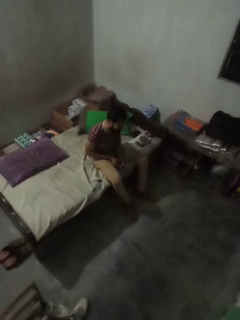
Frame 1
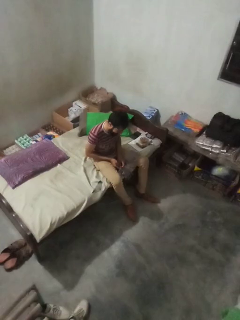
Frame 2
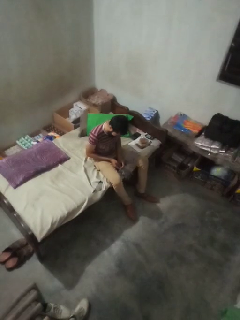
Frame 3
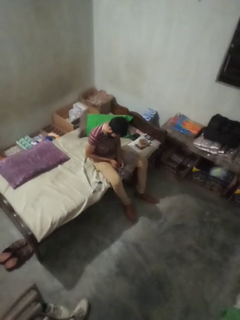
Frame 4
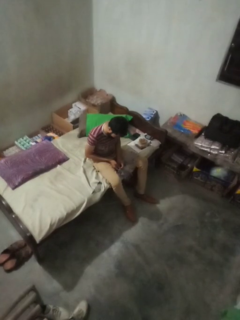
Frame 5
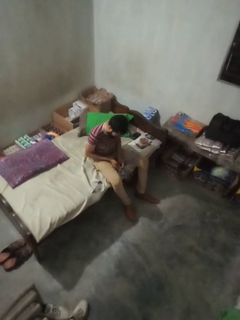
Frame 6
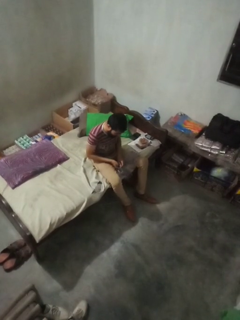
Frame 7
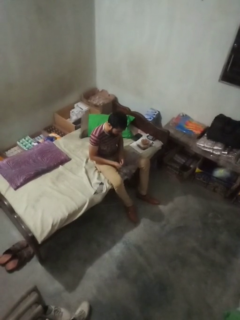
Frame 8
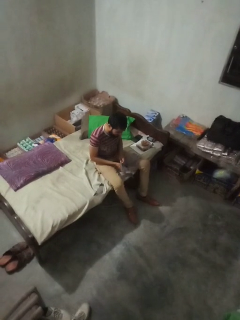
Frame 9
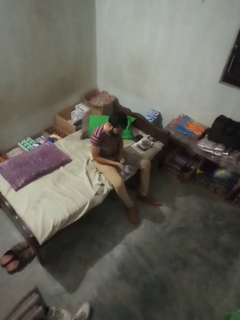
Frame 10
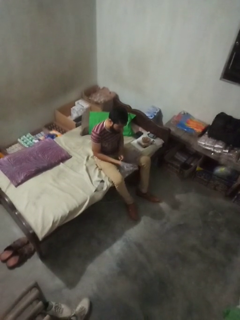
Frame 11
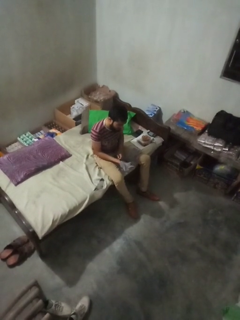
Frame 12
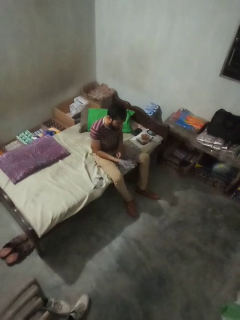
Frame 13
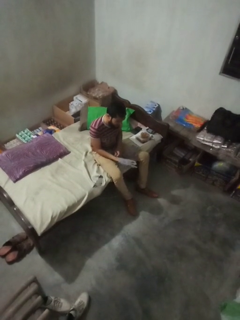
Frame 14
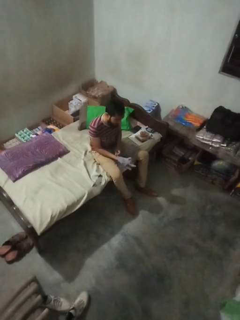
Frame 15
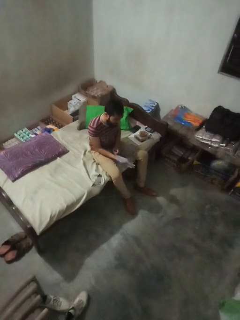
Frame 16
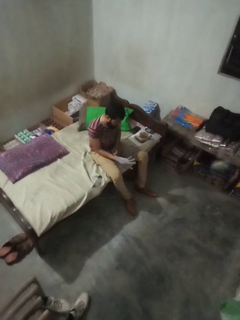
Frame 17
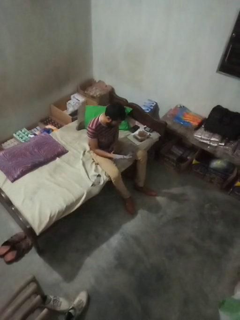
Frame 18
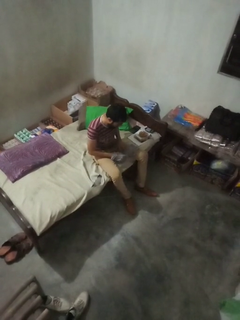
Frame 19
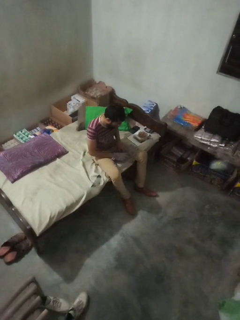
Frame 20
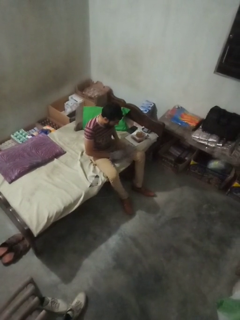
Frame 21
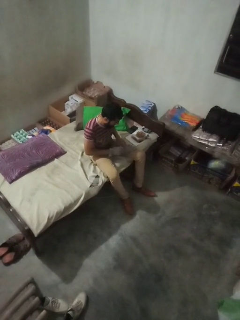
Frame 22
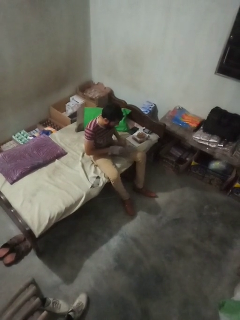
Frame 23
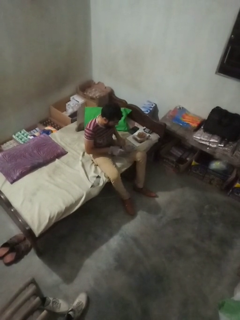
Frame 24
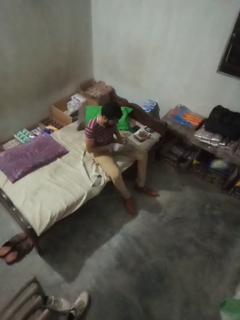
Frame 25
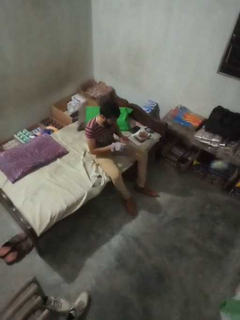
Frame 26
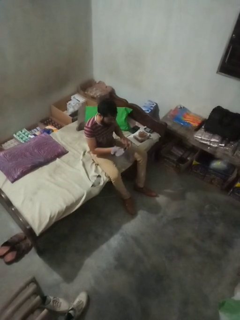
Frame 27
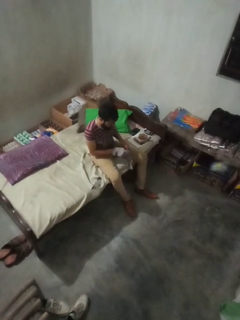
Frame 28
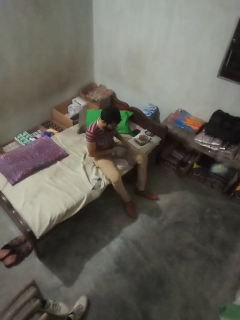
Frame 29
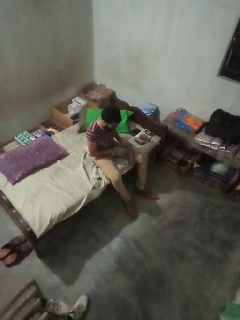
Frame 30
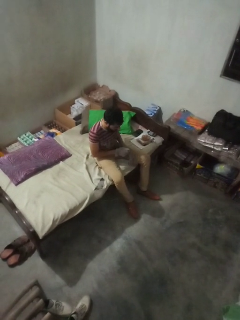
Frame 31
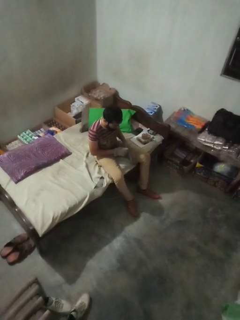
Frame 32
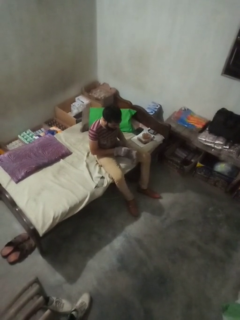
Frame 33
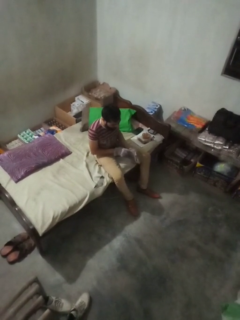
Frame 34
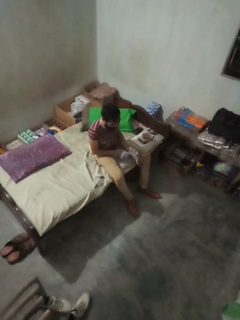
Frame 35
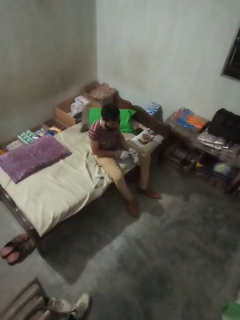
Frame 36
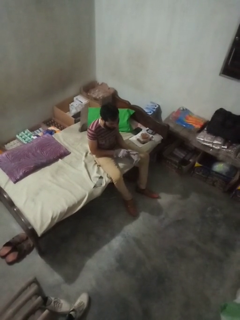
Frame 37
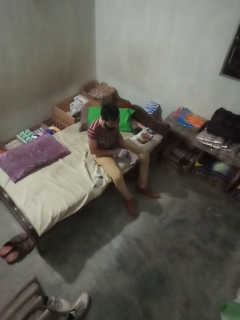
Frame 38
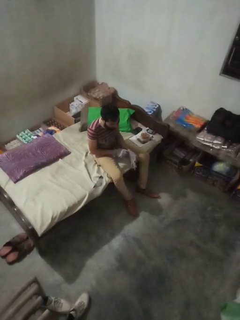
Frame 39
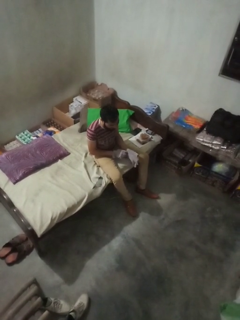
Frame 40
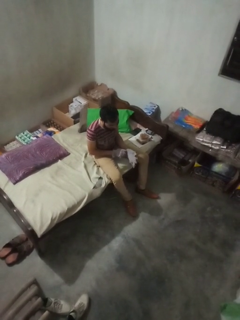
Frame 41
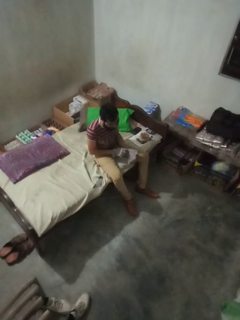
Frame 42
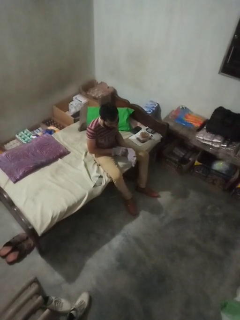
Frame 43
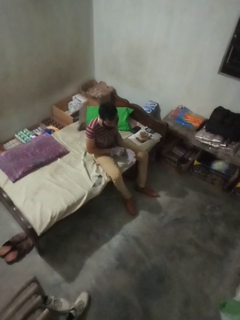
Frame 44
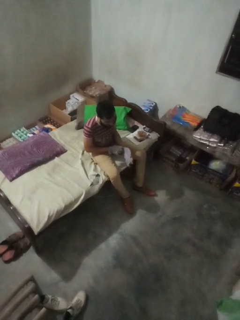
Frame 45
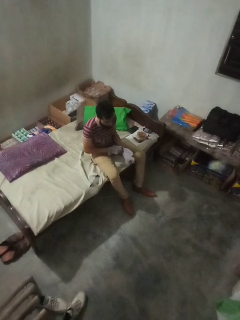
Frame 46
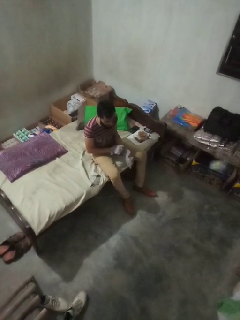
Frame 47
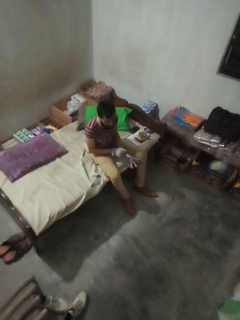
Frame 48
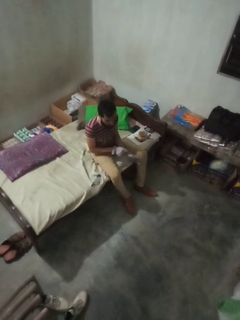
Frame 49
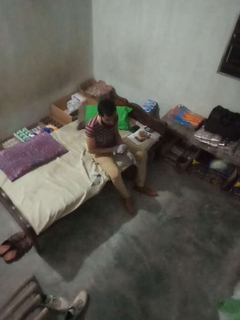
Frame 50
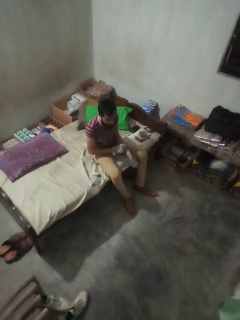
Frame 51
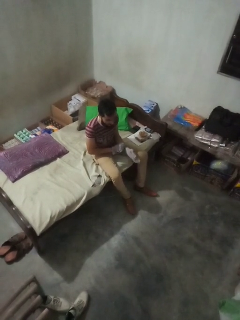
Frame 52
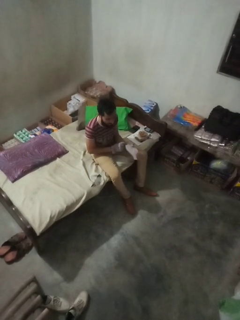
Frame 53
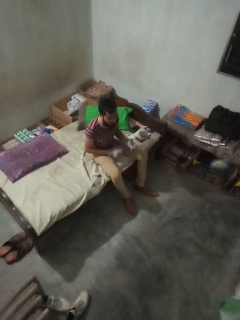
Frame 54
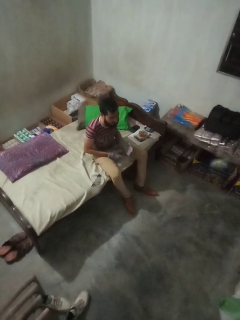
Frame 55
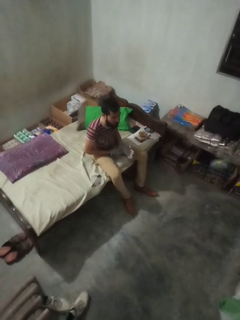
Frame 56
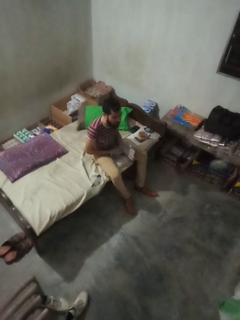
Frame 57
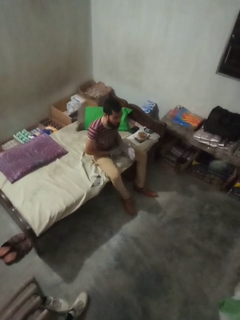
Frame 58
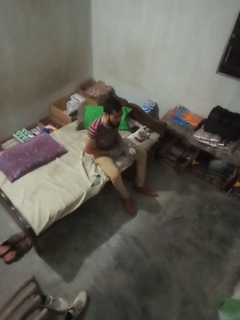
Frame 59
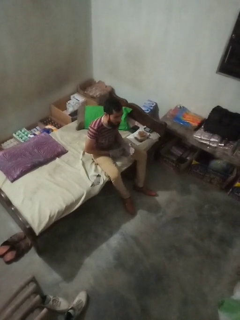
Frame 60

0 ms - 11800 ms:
person puts on gloves

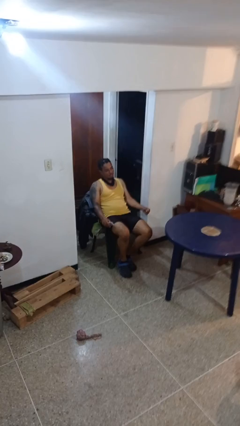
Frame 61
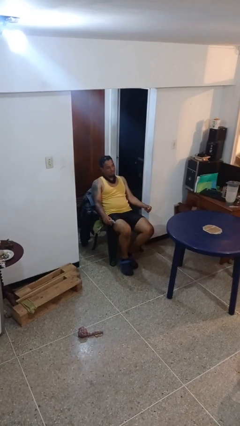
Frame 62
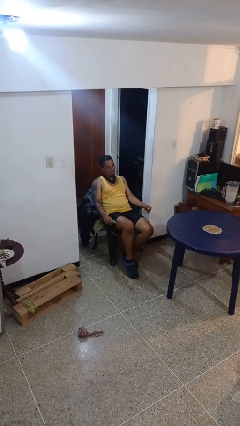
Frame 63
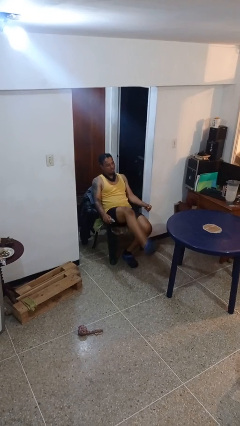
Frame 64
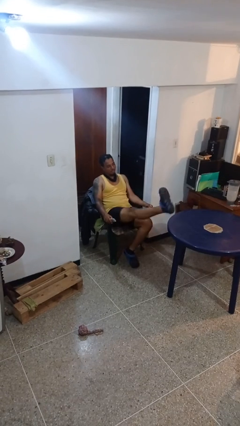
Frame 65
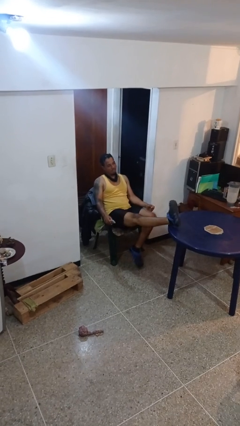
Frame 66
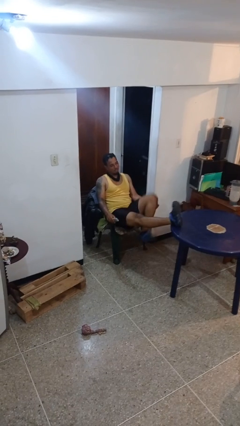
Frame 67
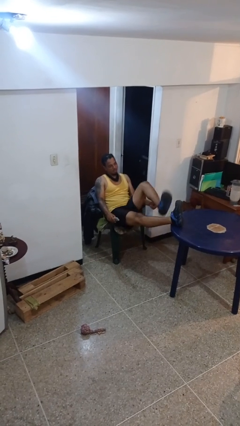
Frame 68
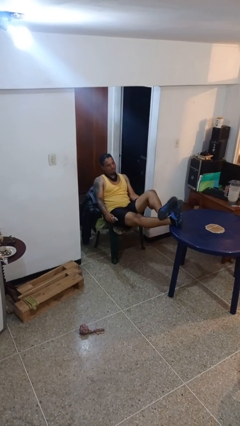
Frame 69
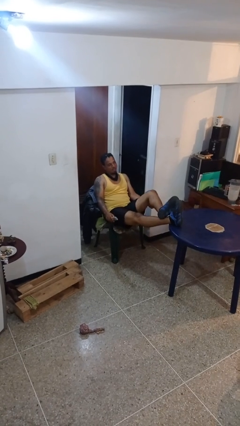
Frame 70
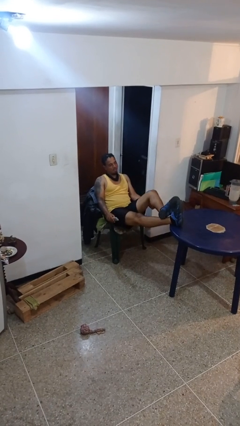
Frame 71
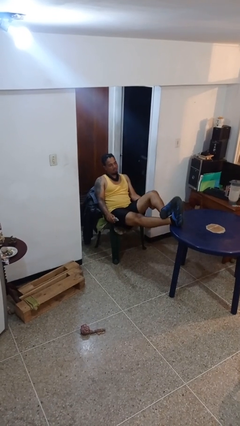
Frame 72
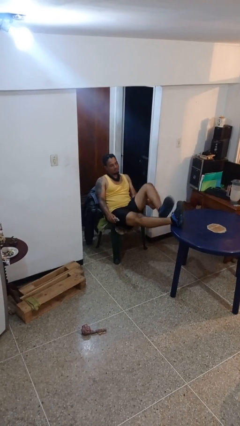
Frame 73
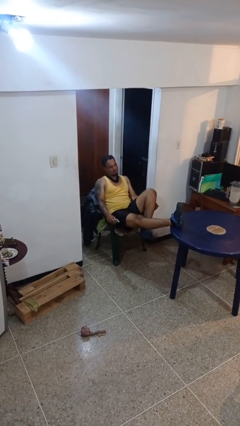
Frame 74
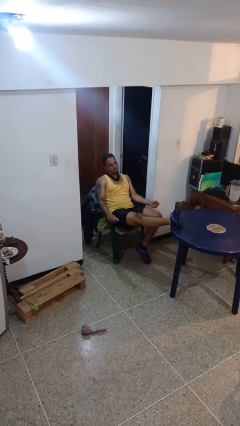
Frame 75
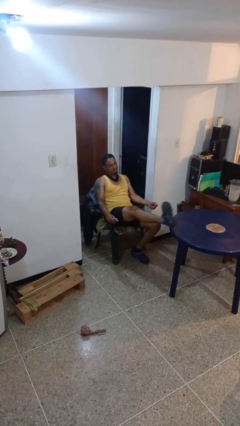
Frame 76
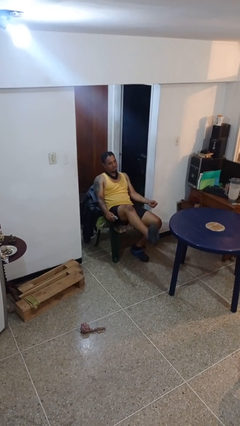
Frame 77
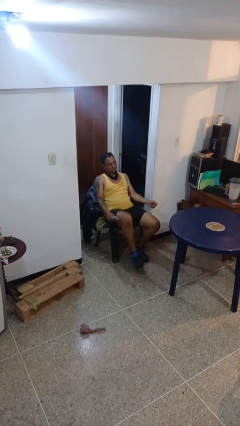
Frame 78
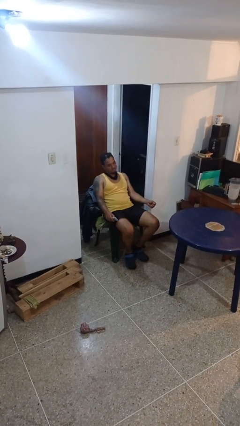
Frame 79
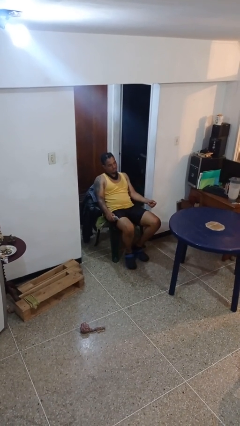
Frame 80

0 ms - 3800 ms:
person puts feet up

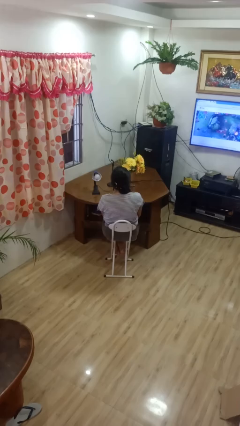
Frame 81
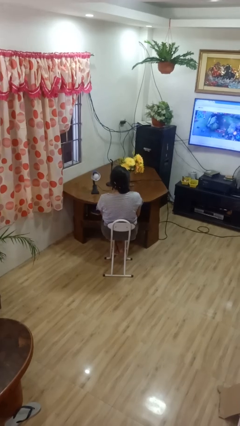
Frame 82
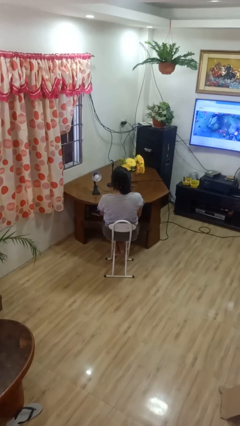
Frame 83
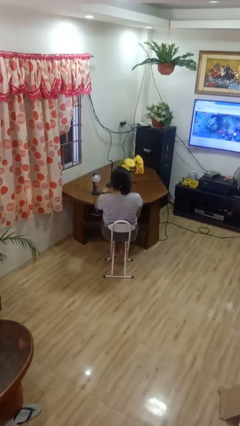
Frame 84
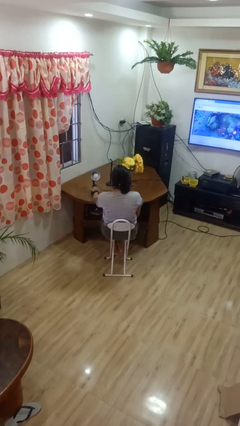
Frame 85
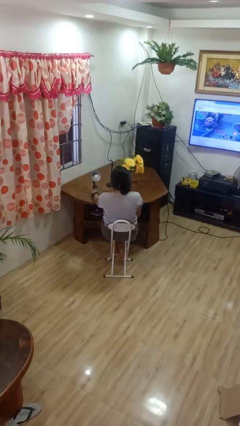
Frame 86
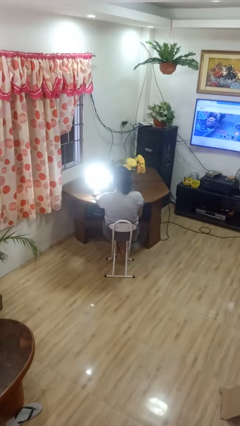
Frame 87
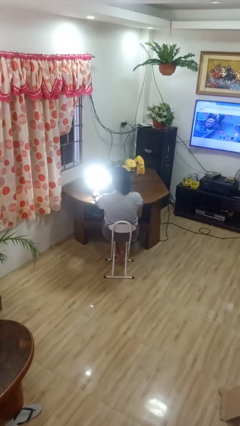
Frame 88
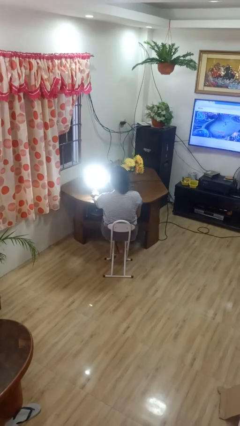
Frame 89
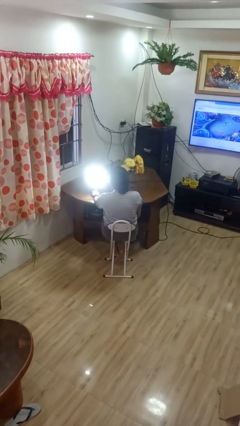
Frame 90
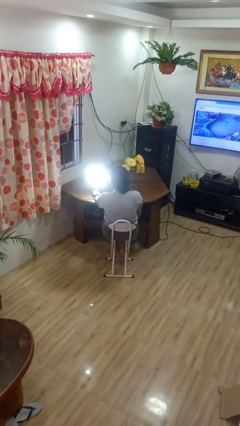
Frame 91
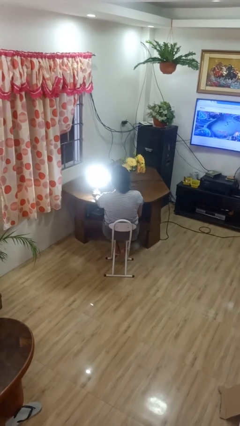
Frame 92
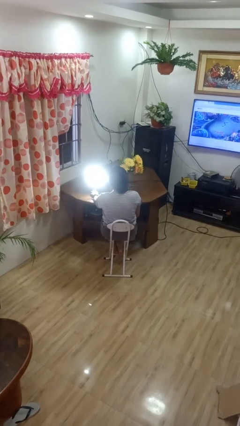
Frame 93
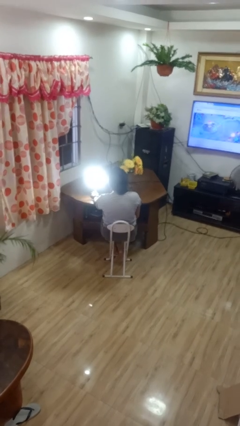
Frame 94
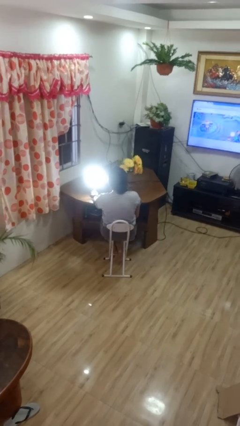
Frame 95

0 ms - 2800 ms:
person turns on lamp

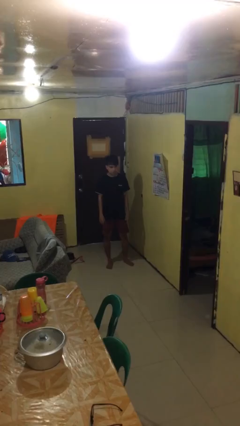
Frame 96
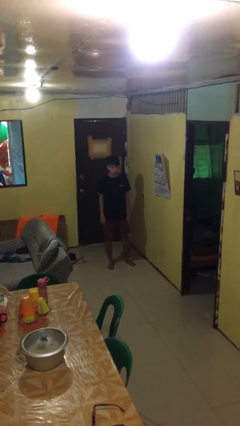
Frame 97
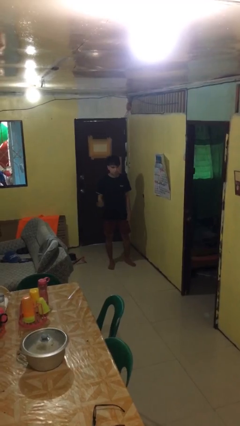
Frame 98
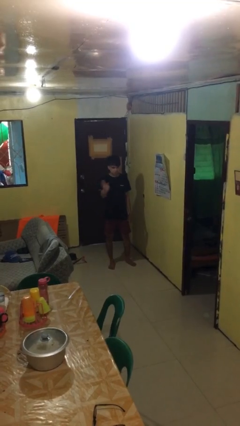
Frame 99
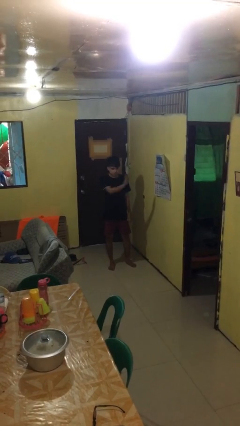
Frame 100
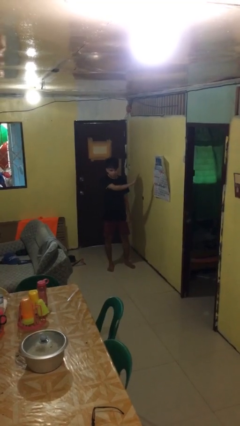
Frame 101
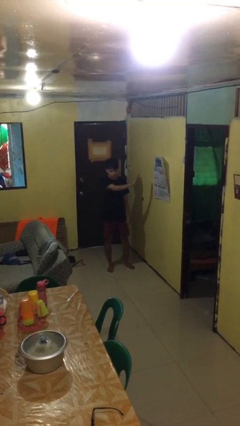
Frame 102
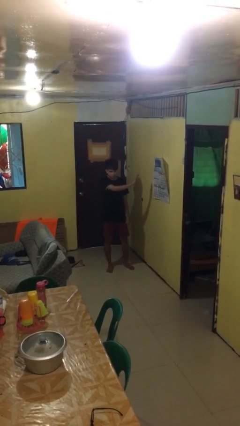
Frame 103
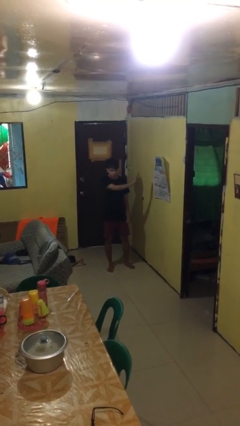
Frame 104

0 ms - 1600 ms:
person gestures swipe left

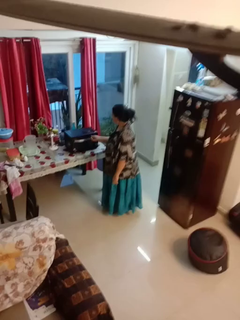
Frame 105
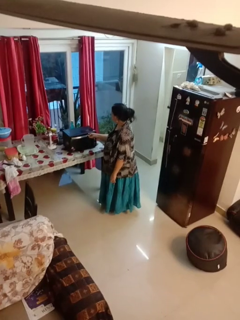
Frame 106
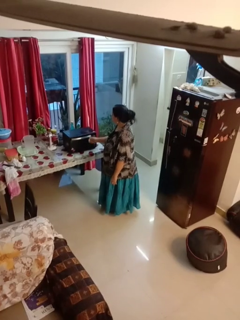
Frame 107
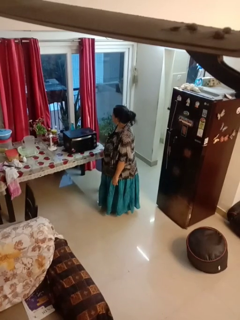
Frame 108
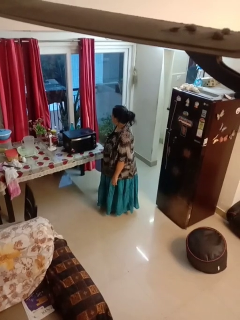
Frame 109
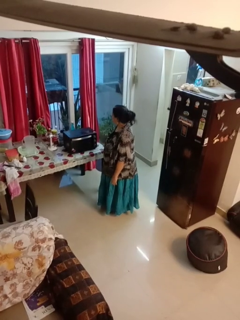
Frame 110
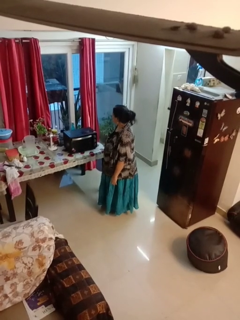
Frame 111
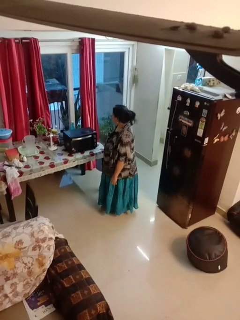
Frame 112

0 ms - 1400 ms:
person closes microwave
